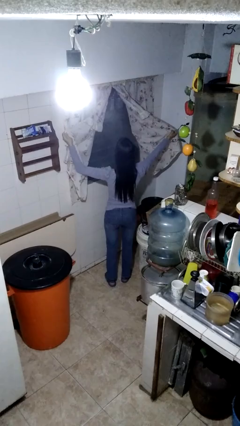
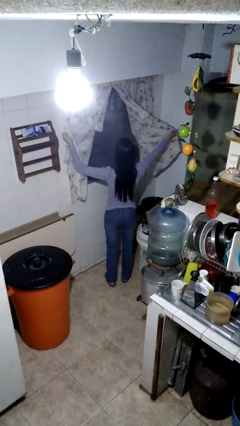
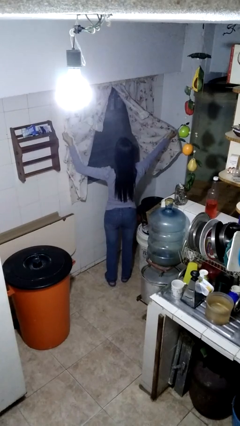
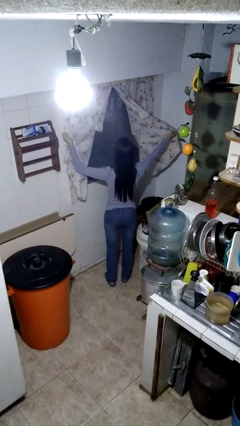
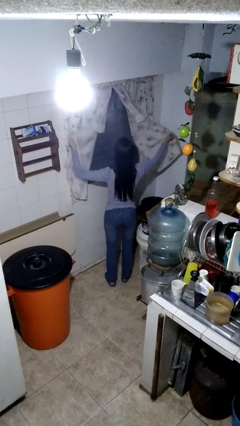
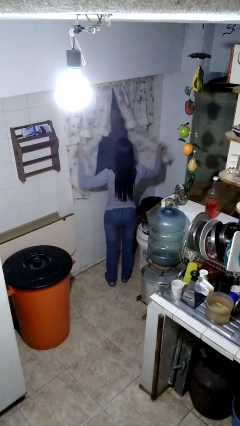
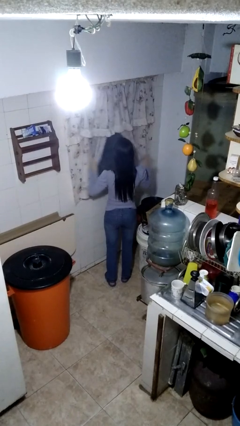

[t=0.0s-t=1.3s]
person closes curtains

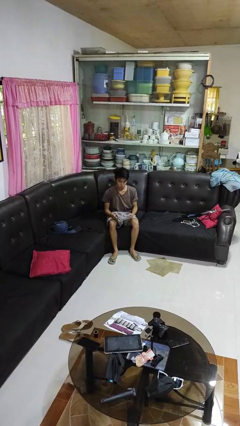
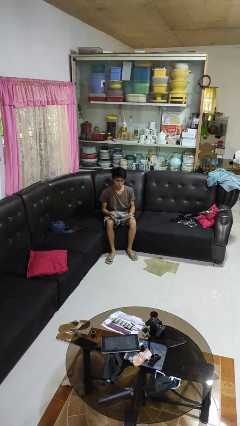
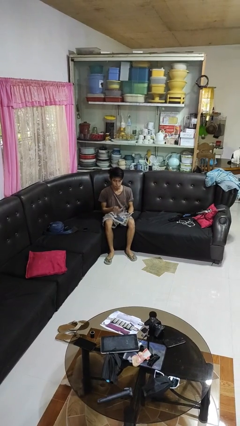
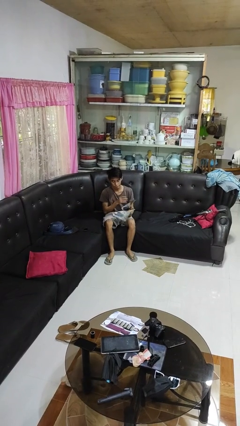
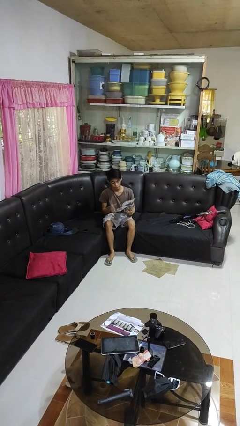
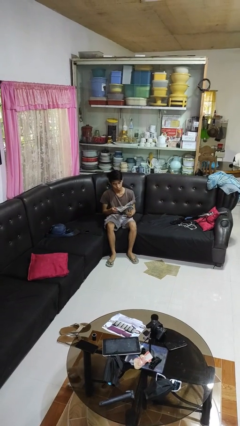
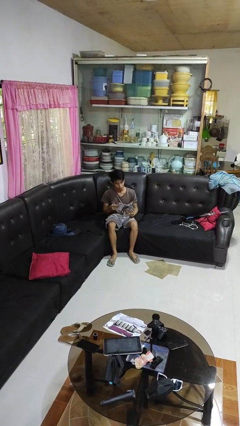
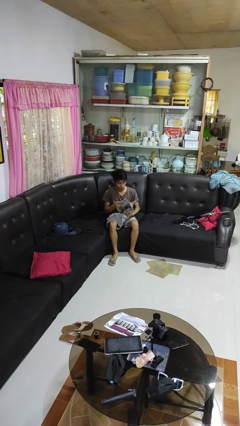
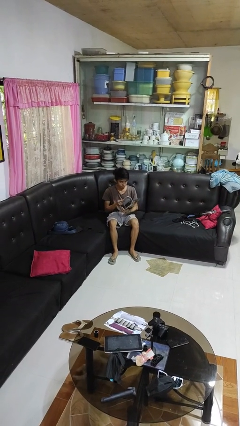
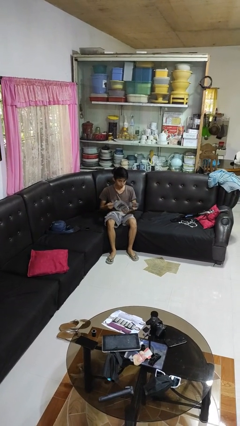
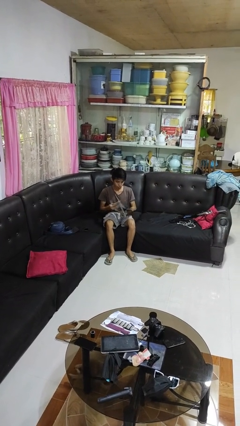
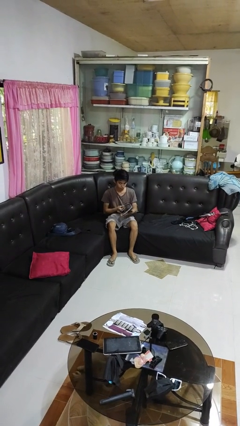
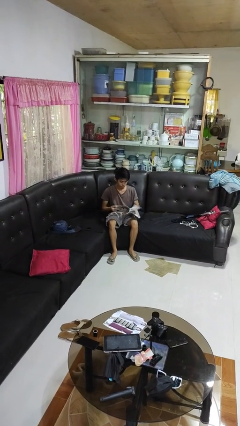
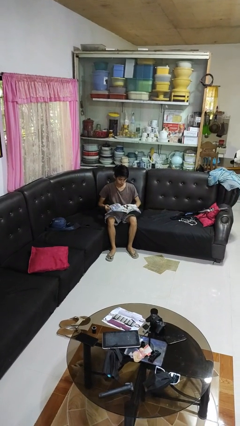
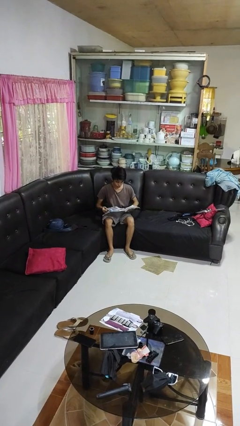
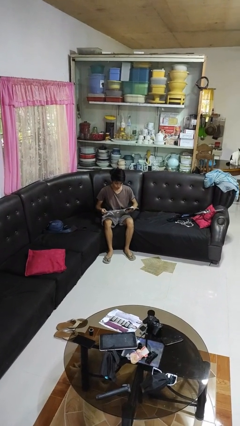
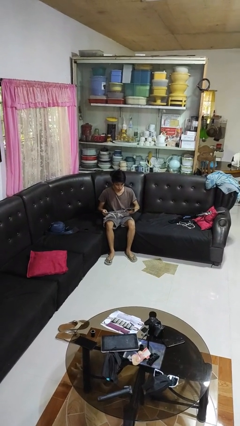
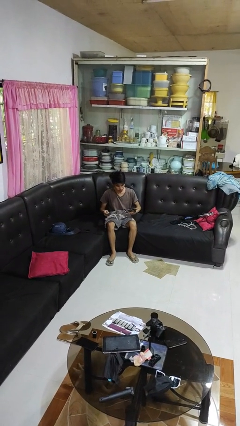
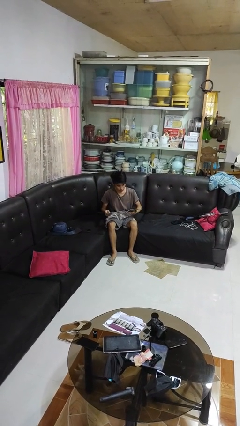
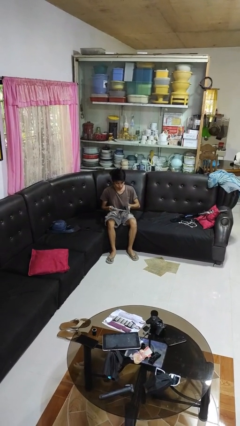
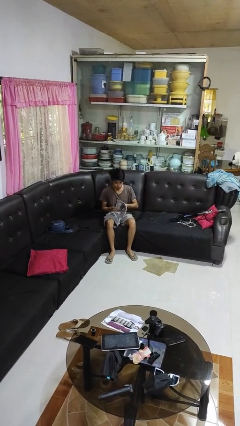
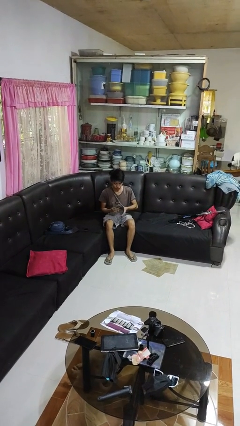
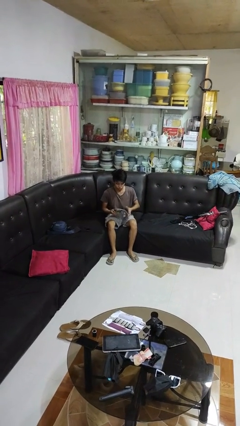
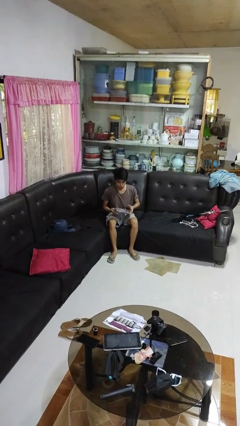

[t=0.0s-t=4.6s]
person reads magazine

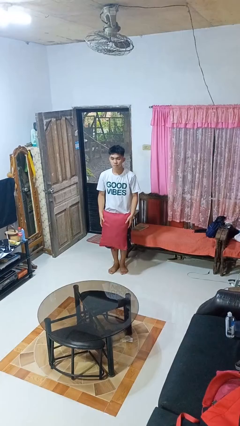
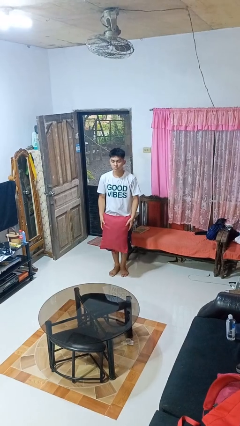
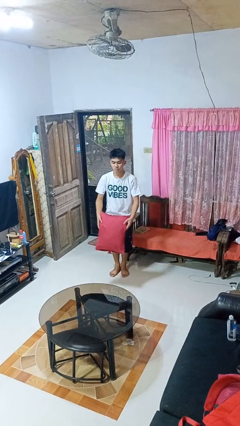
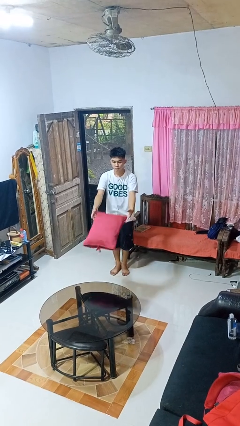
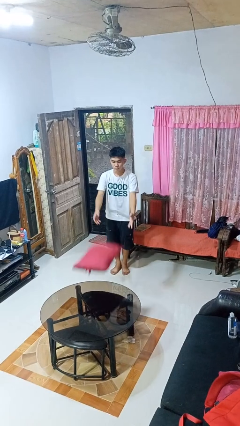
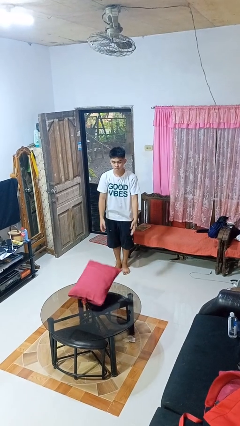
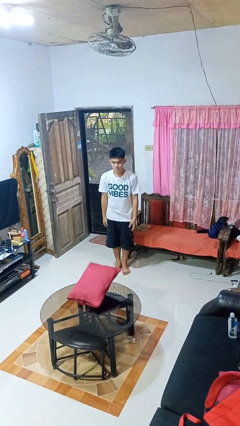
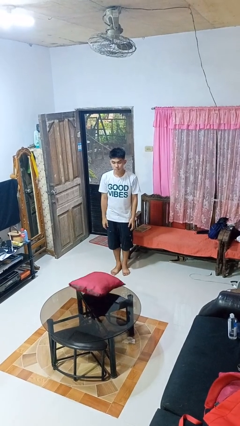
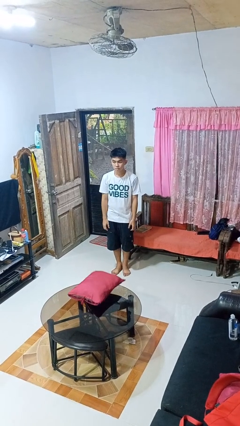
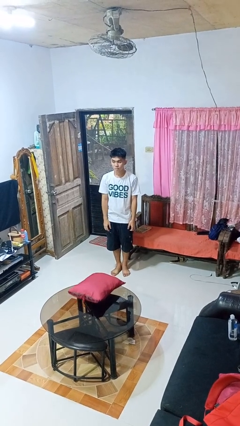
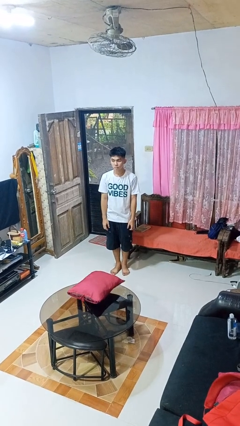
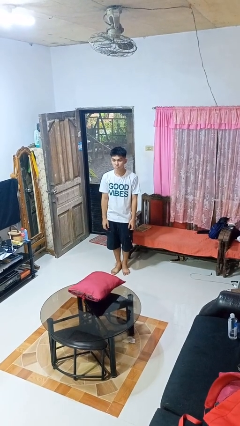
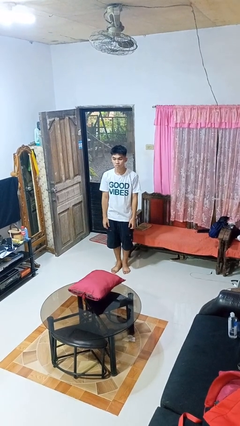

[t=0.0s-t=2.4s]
person throws object on table

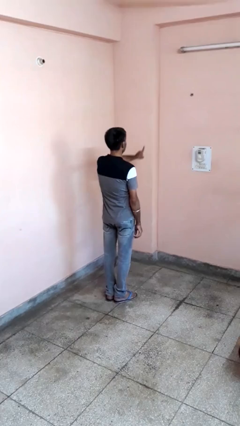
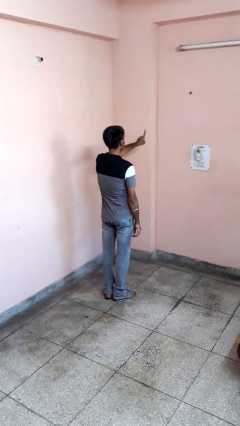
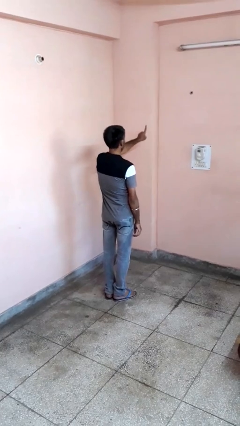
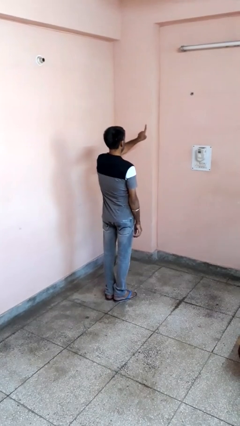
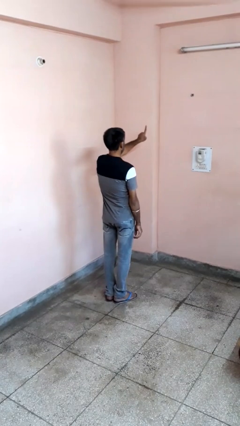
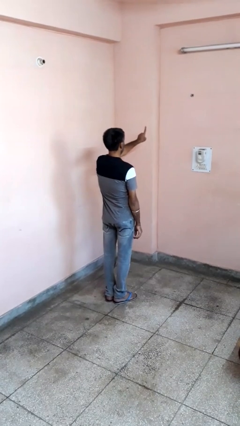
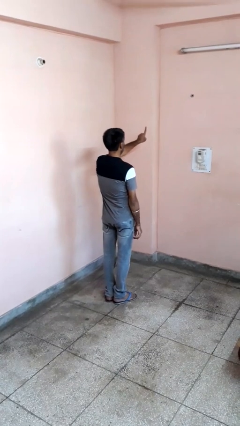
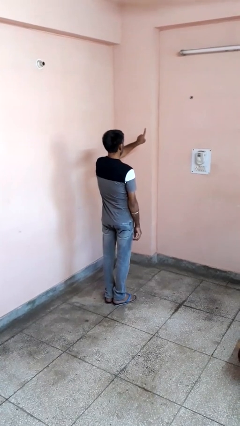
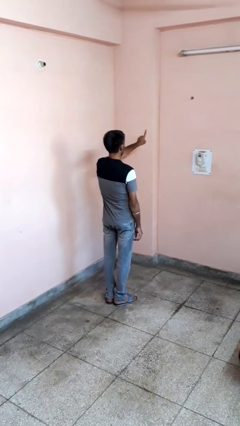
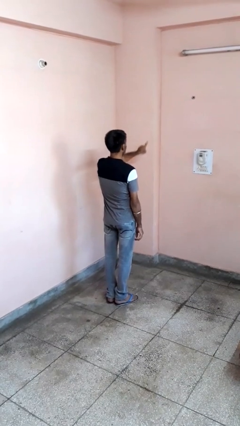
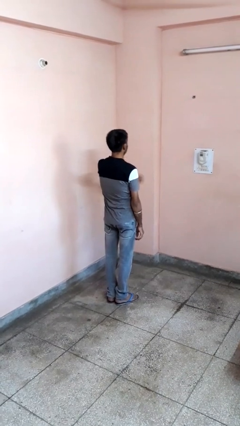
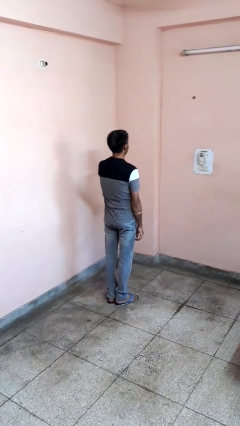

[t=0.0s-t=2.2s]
person gestures number one

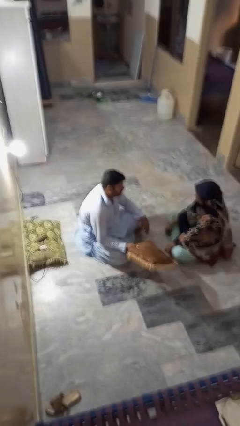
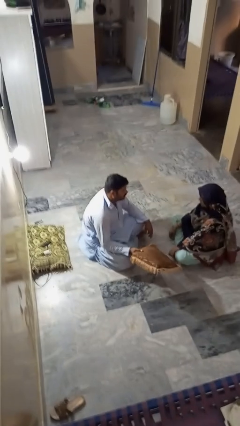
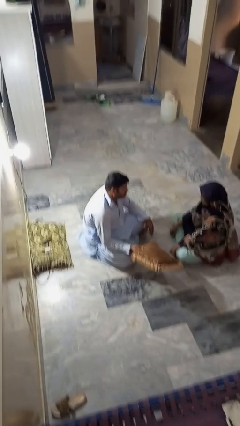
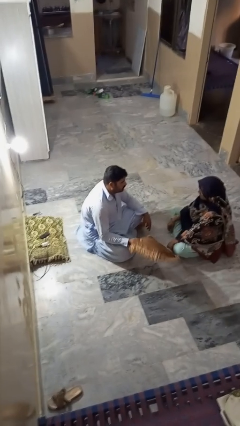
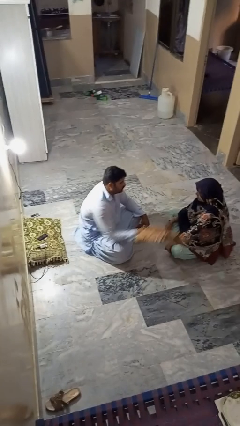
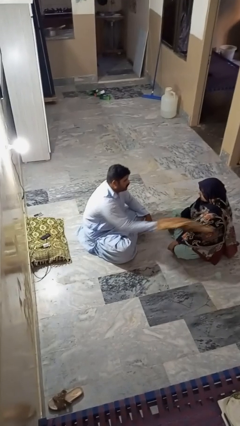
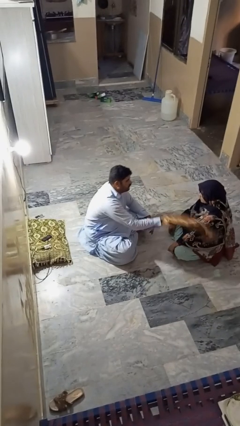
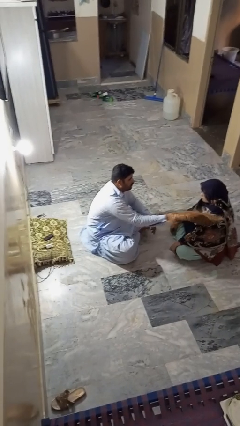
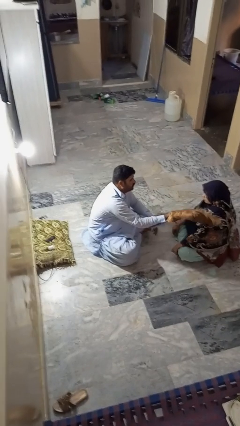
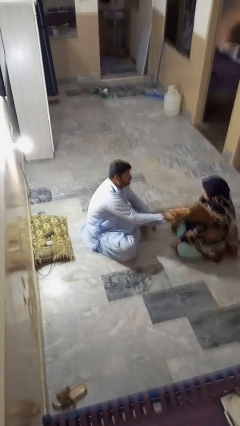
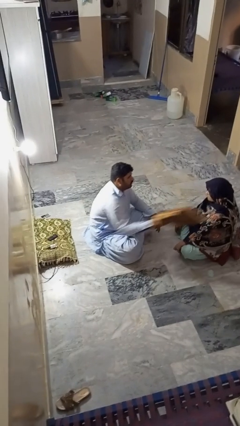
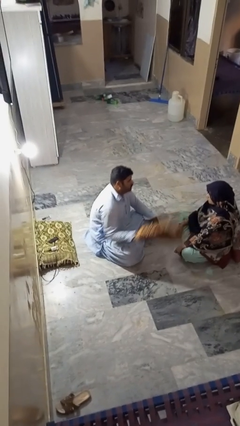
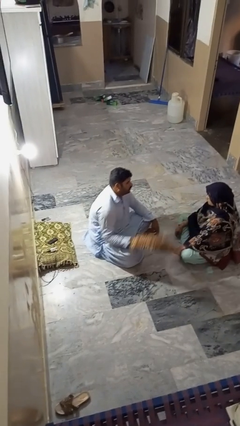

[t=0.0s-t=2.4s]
person hits person with pillow

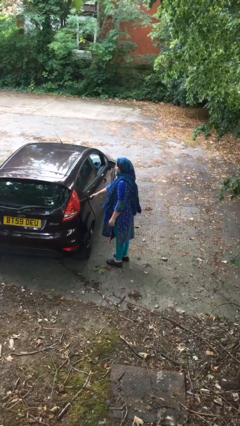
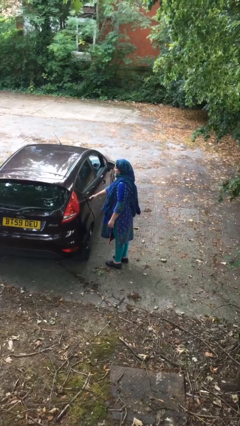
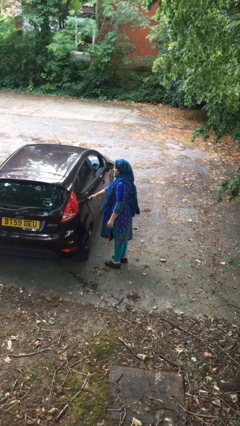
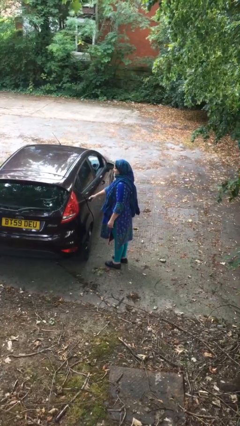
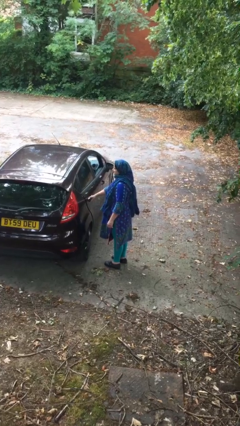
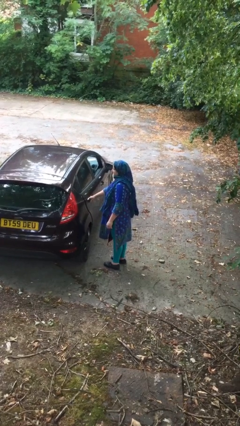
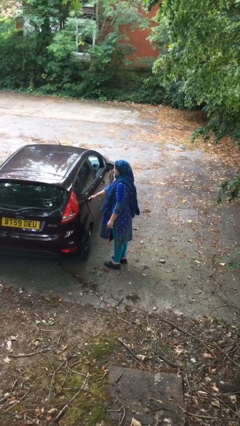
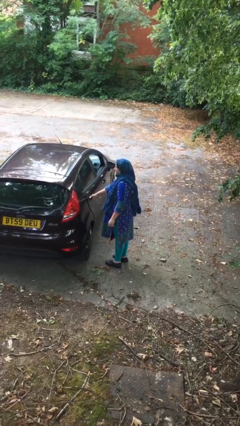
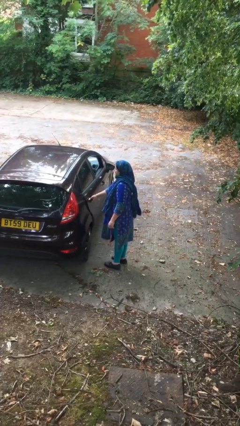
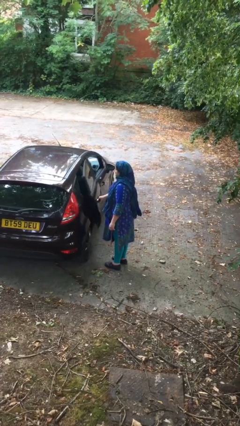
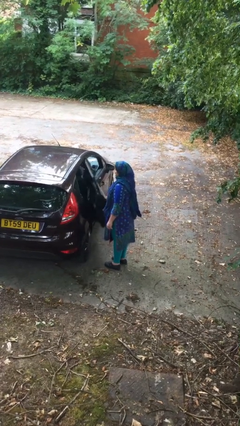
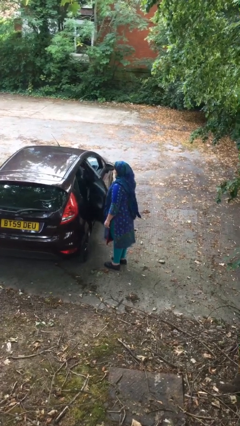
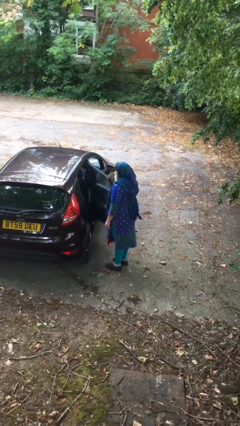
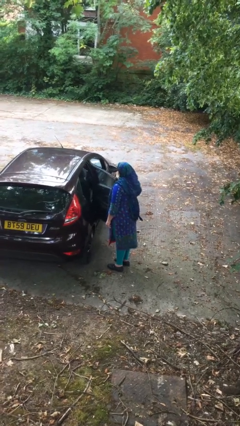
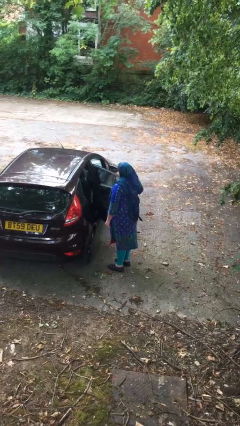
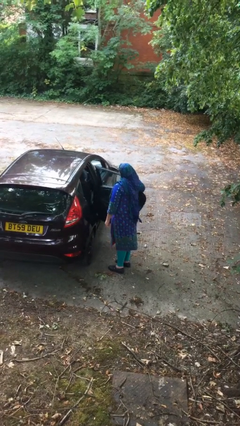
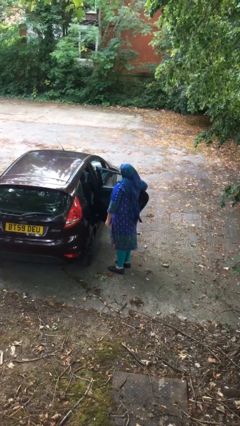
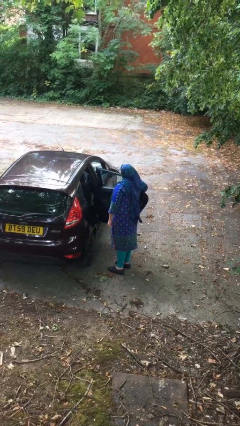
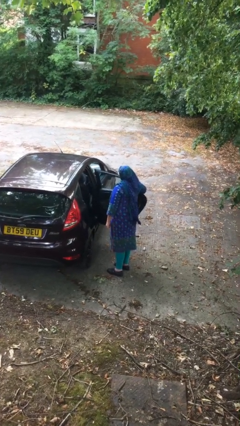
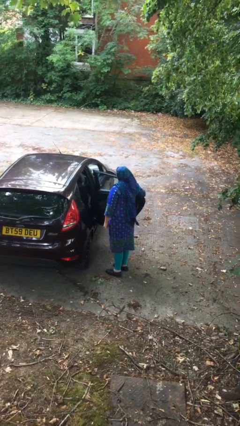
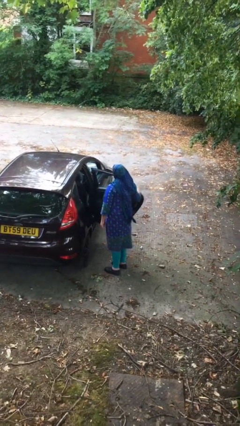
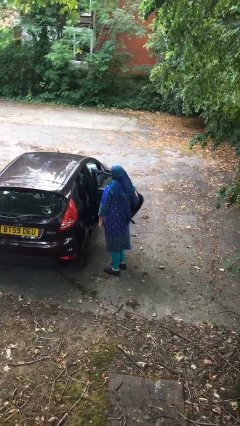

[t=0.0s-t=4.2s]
person opens car door

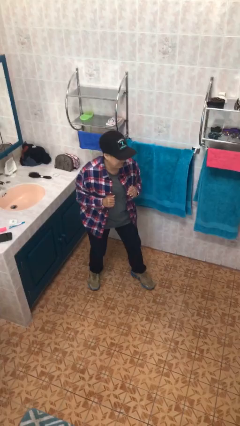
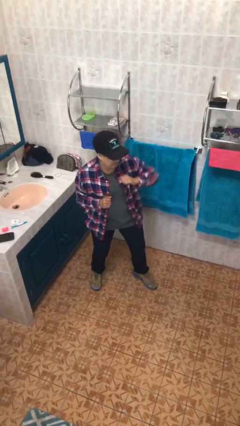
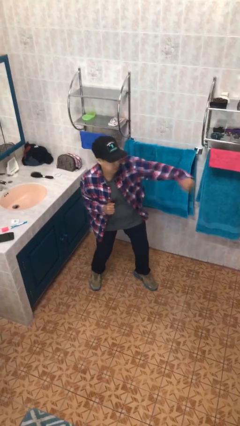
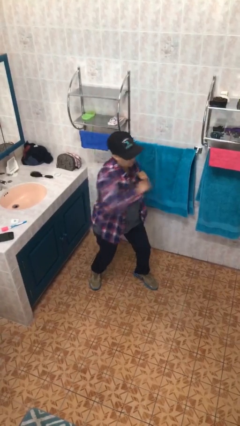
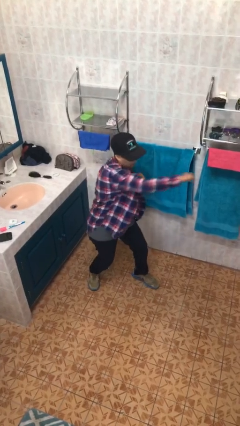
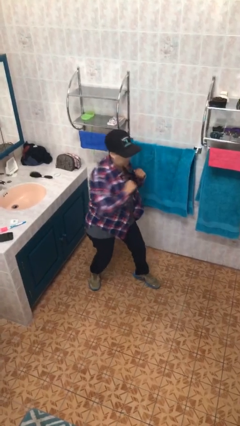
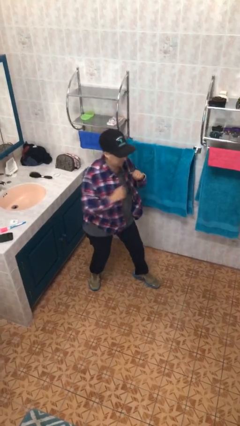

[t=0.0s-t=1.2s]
person karate chop
